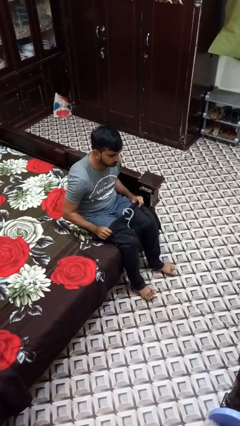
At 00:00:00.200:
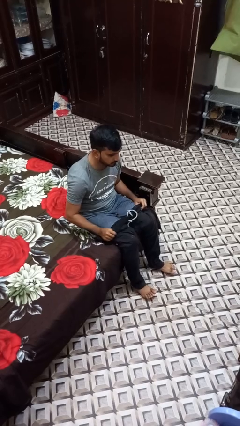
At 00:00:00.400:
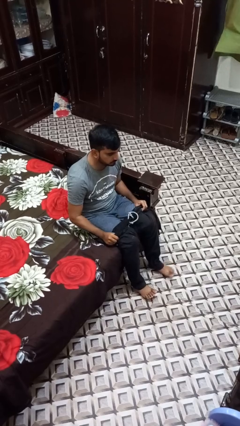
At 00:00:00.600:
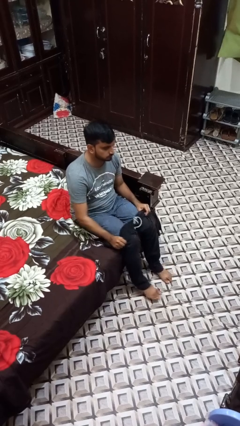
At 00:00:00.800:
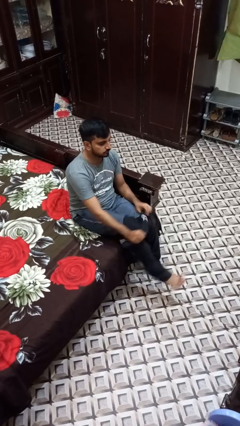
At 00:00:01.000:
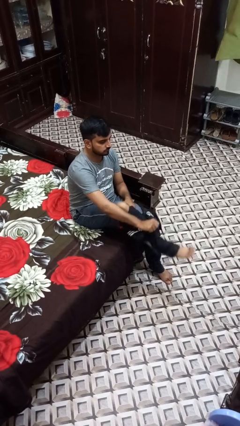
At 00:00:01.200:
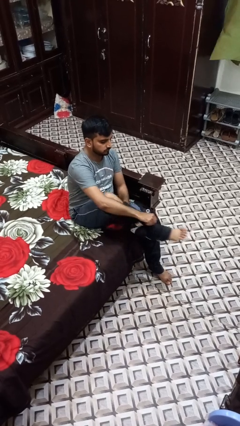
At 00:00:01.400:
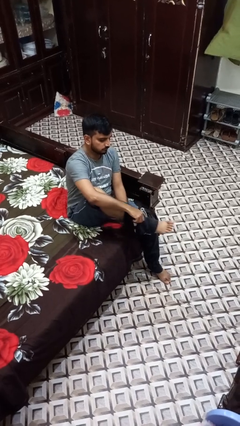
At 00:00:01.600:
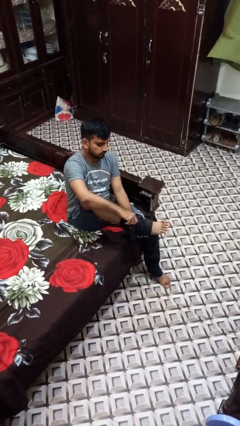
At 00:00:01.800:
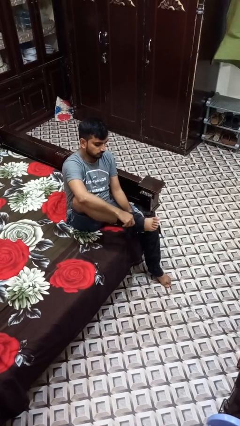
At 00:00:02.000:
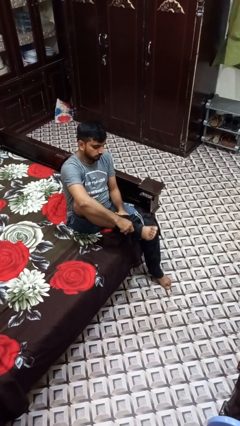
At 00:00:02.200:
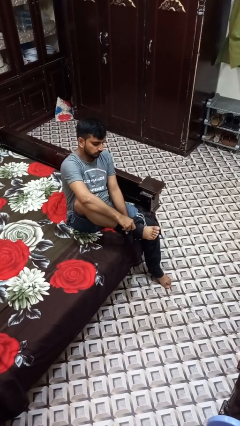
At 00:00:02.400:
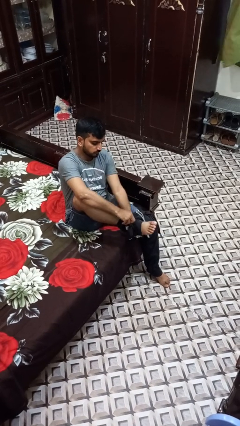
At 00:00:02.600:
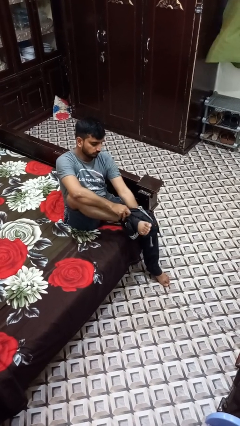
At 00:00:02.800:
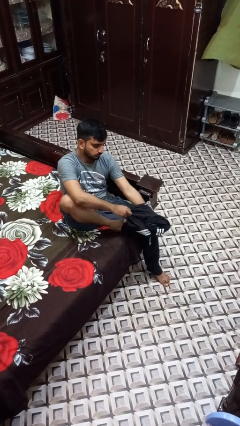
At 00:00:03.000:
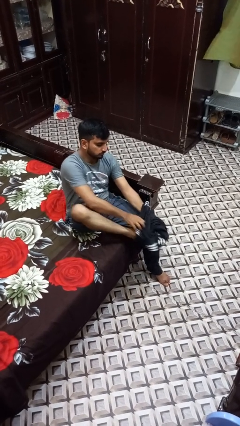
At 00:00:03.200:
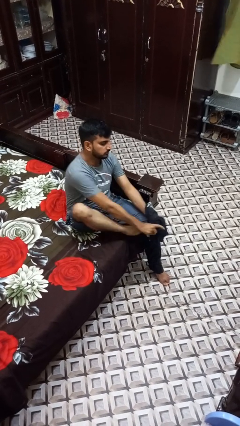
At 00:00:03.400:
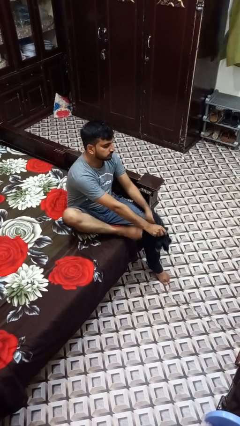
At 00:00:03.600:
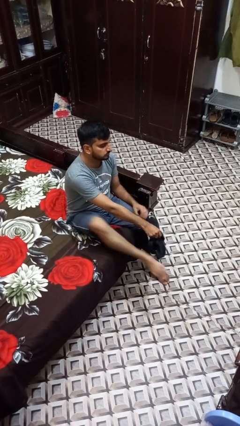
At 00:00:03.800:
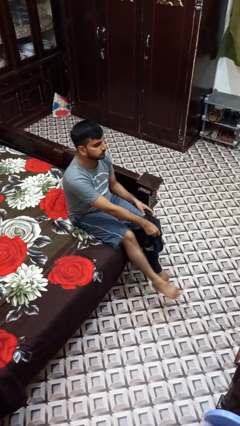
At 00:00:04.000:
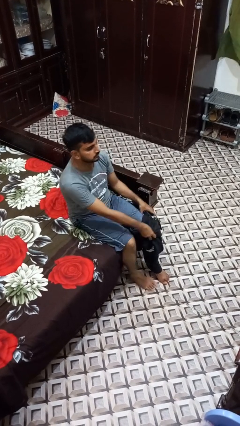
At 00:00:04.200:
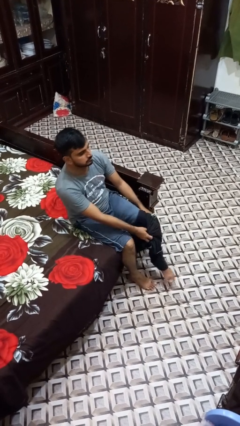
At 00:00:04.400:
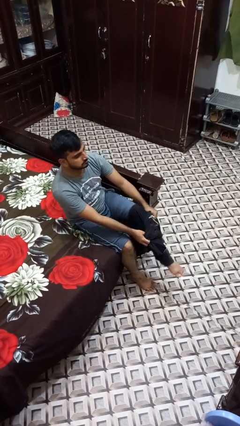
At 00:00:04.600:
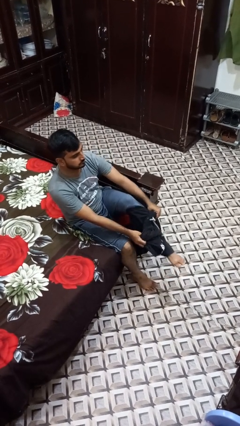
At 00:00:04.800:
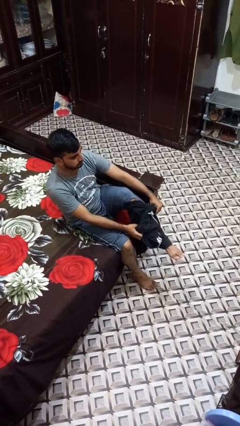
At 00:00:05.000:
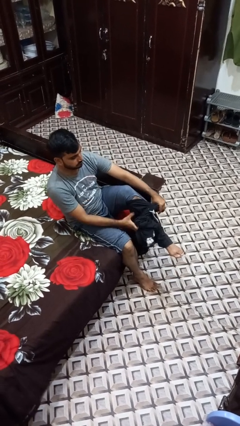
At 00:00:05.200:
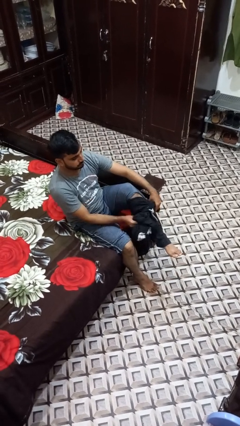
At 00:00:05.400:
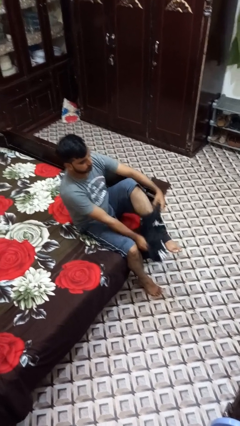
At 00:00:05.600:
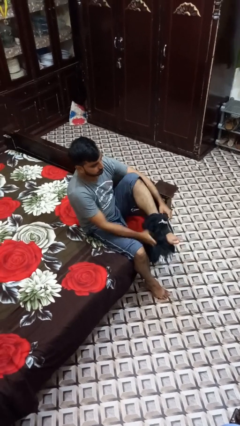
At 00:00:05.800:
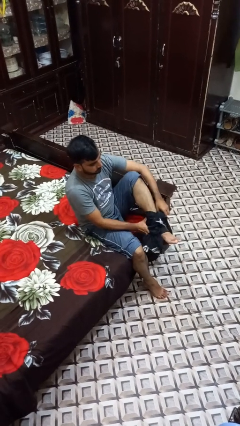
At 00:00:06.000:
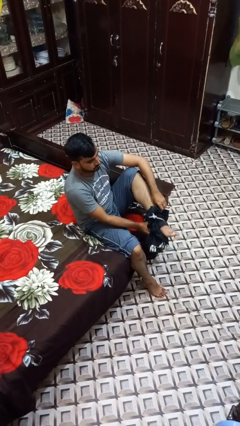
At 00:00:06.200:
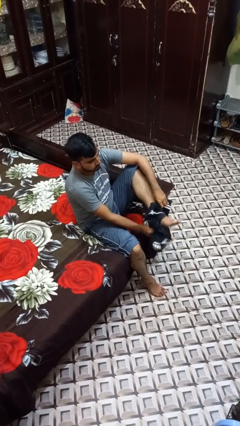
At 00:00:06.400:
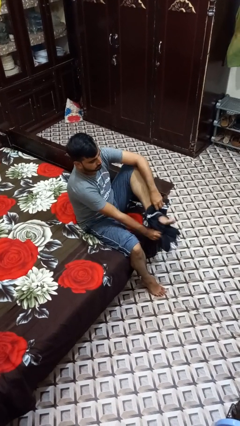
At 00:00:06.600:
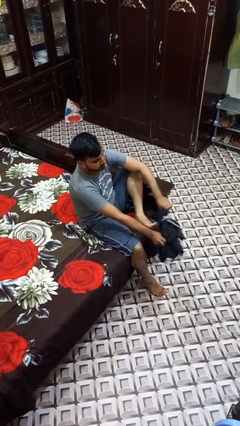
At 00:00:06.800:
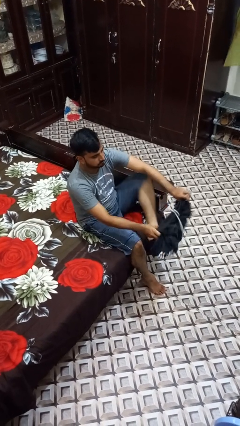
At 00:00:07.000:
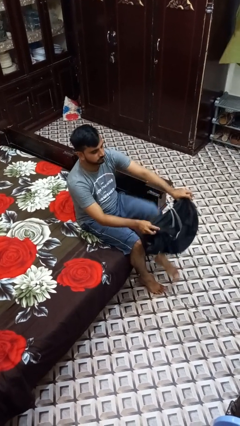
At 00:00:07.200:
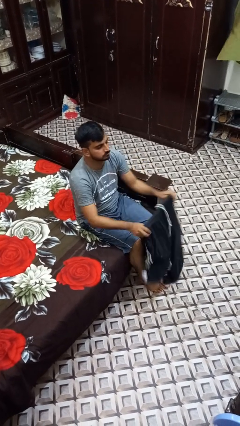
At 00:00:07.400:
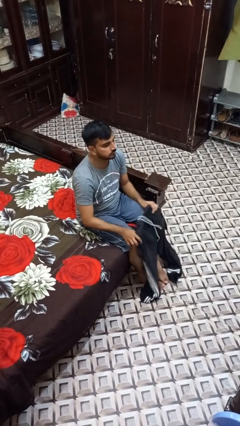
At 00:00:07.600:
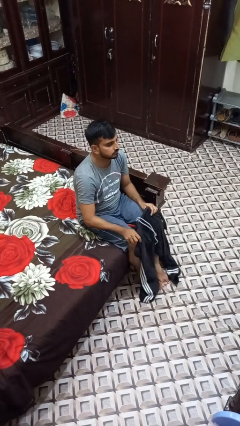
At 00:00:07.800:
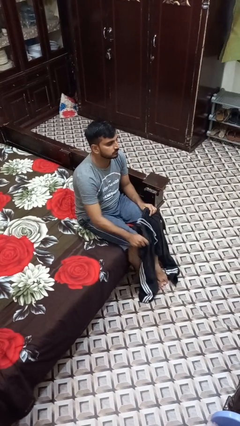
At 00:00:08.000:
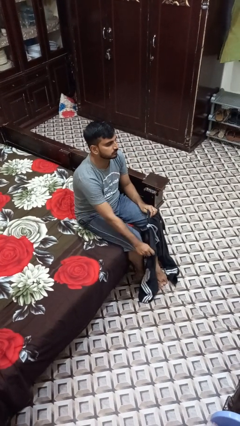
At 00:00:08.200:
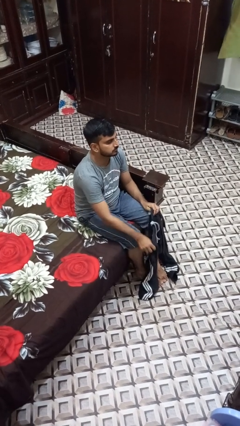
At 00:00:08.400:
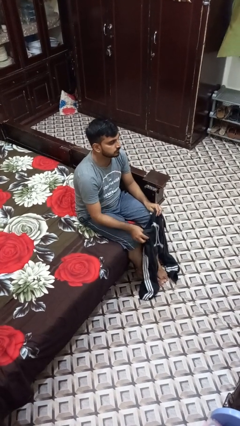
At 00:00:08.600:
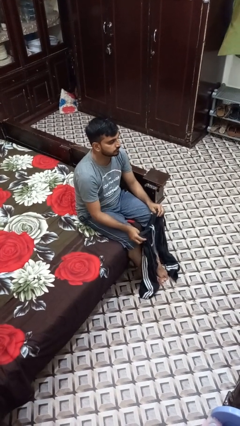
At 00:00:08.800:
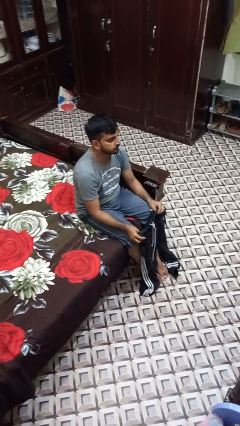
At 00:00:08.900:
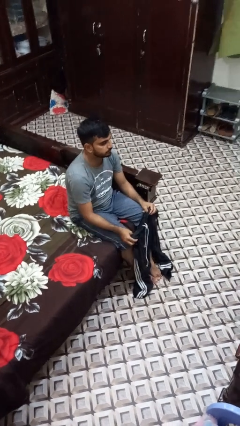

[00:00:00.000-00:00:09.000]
person takes off pants

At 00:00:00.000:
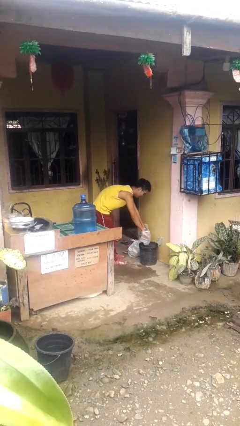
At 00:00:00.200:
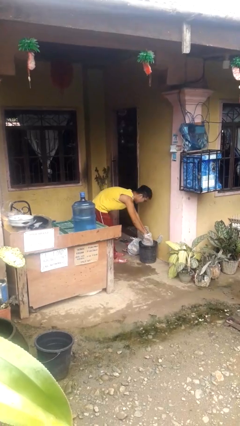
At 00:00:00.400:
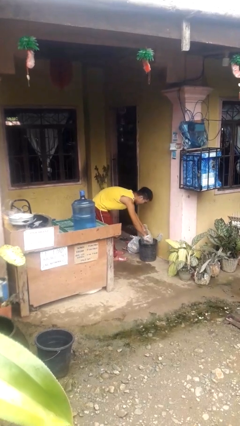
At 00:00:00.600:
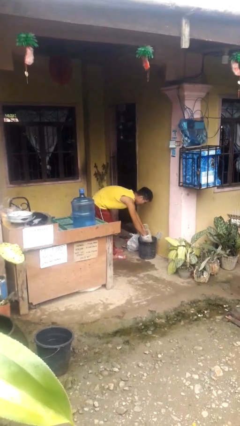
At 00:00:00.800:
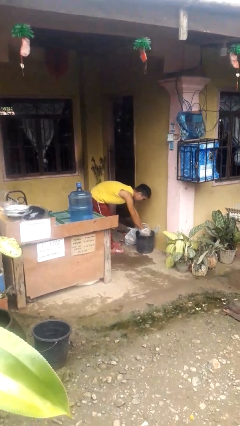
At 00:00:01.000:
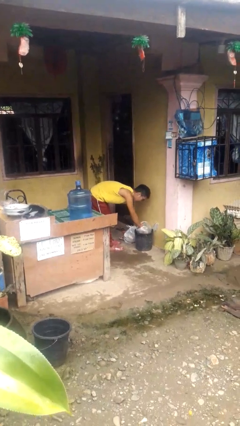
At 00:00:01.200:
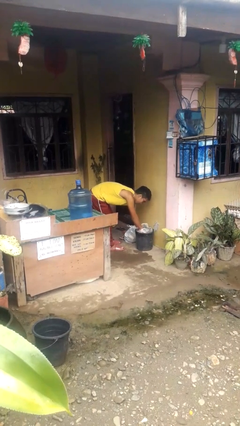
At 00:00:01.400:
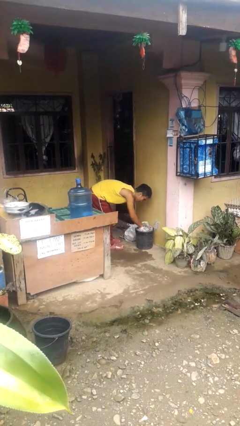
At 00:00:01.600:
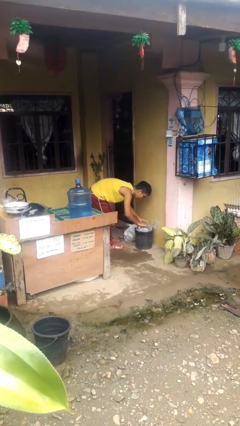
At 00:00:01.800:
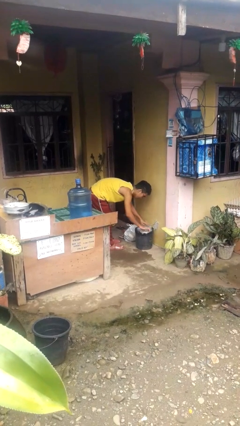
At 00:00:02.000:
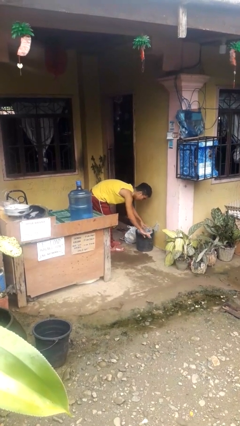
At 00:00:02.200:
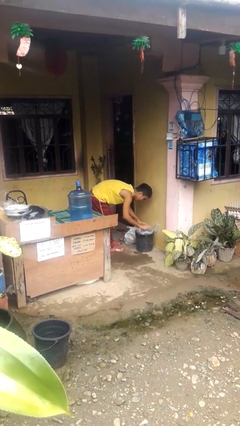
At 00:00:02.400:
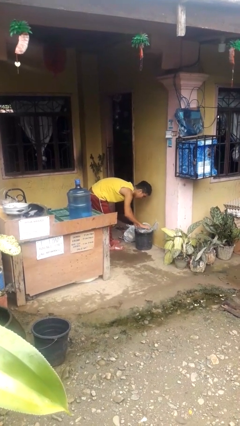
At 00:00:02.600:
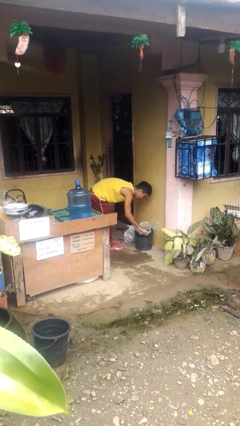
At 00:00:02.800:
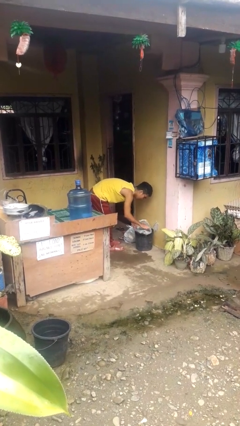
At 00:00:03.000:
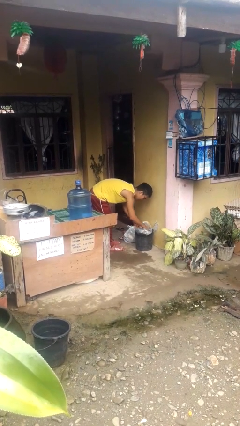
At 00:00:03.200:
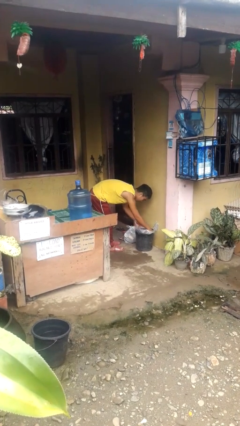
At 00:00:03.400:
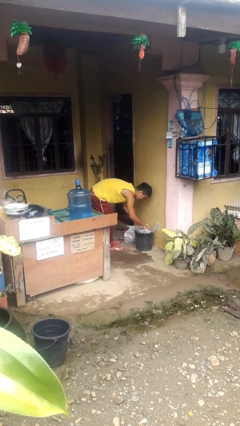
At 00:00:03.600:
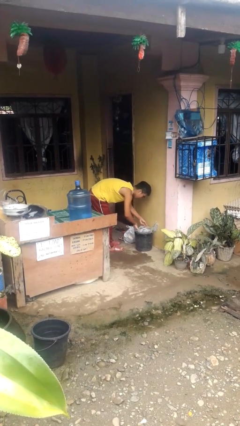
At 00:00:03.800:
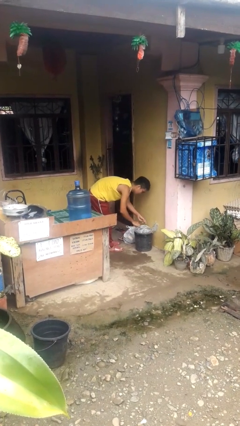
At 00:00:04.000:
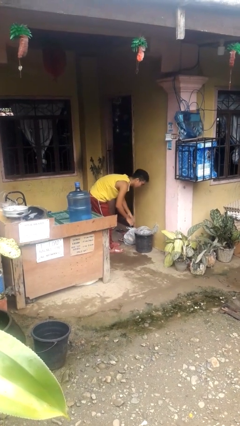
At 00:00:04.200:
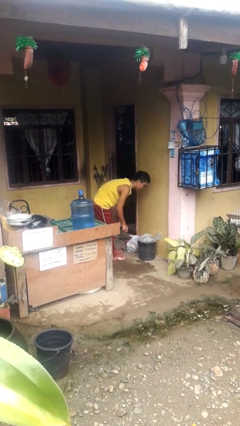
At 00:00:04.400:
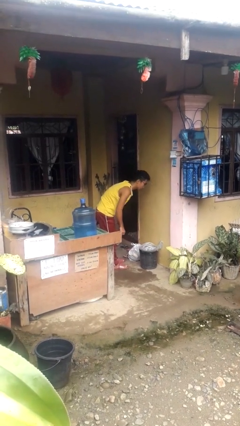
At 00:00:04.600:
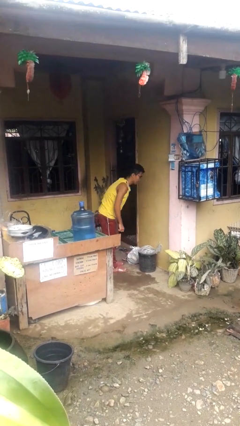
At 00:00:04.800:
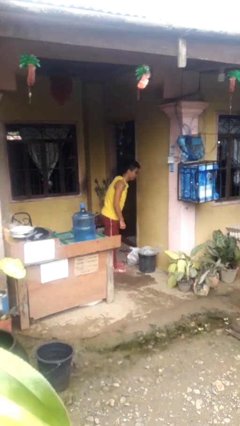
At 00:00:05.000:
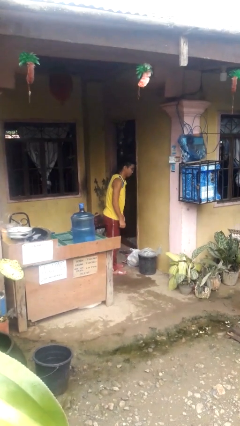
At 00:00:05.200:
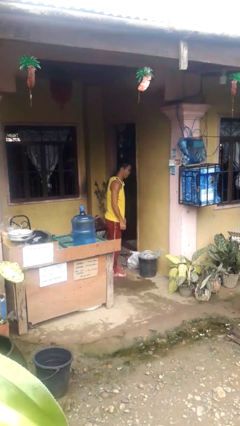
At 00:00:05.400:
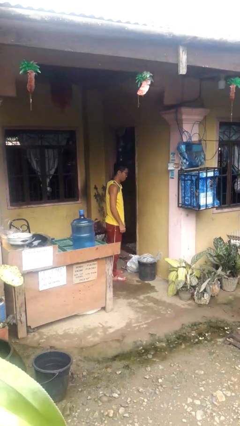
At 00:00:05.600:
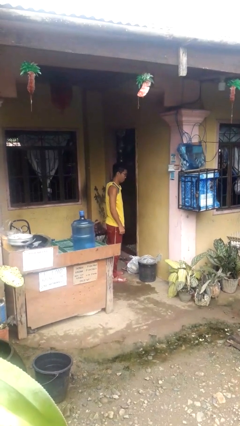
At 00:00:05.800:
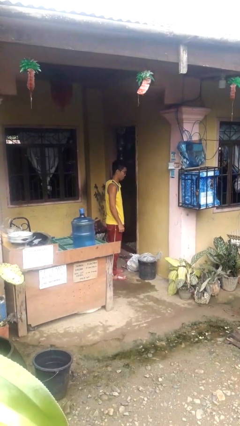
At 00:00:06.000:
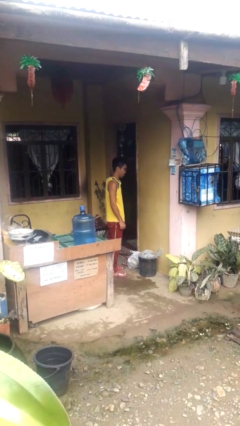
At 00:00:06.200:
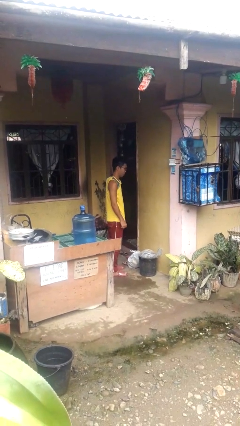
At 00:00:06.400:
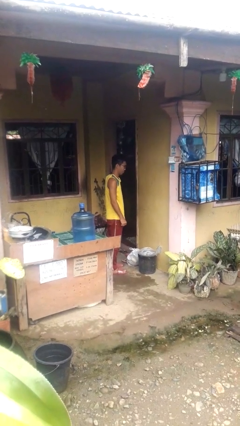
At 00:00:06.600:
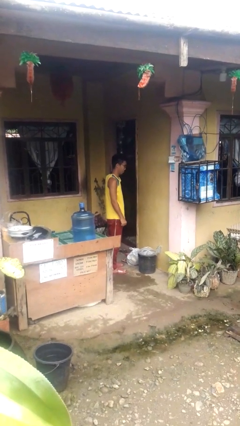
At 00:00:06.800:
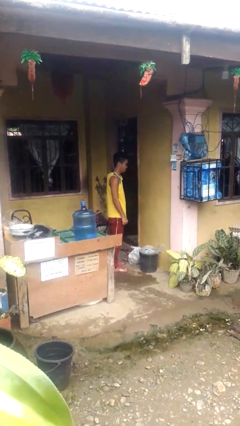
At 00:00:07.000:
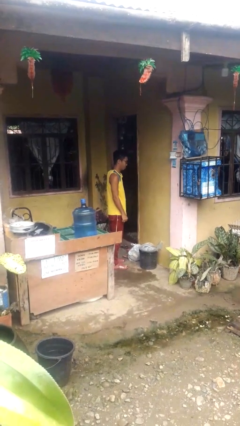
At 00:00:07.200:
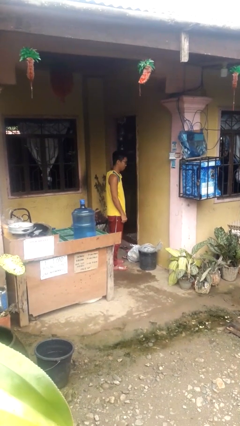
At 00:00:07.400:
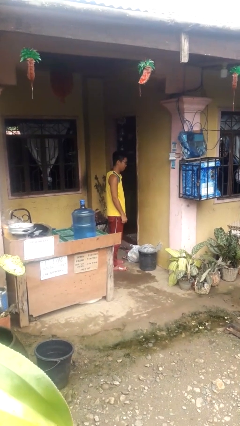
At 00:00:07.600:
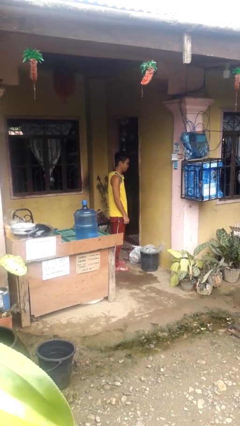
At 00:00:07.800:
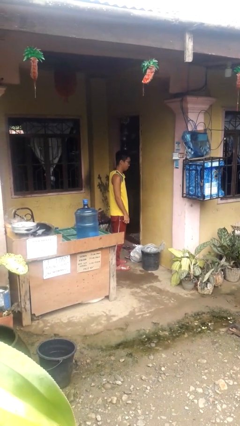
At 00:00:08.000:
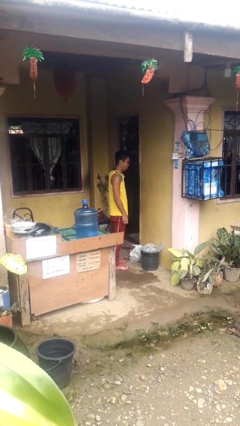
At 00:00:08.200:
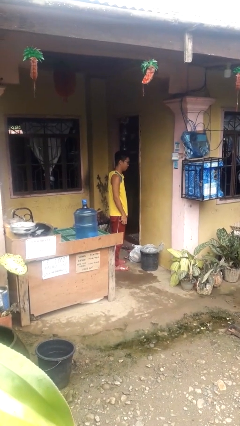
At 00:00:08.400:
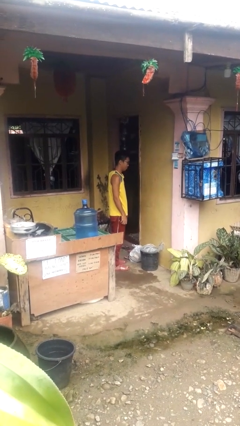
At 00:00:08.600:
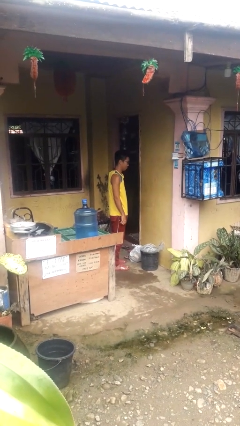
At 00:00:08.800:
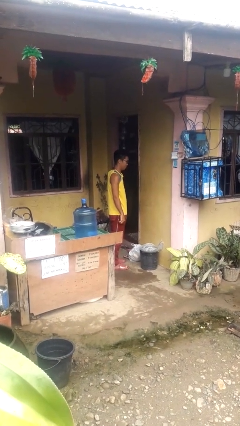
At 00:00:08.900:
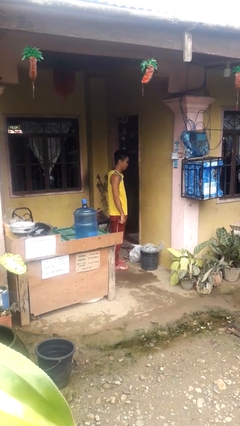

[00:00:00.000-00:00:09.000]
person inserts trashbag into trashcan
